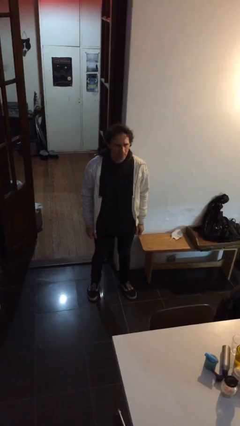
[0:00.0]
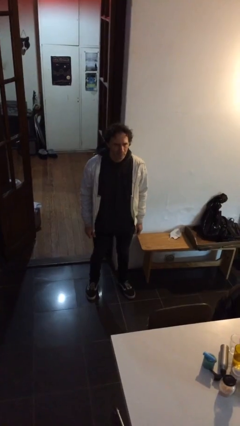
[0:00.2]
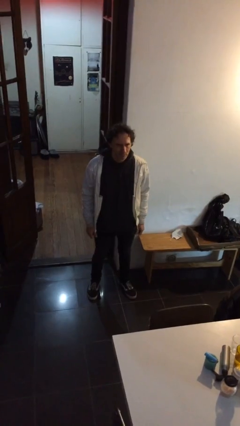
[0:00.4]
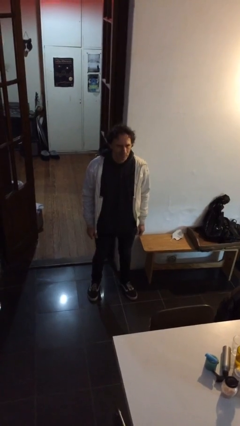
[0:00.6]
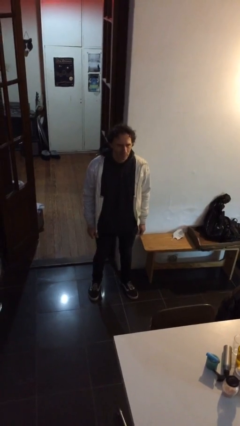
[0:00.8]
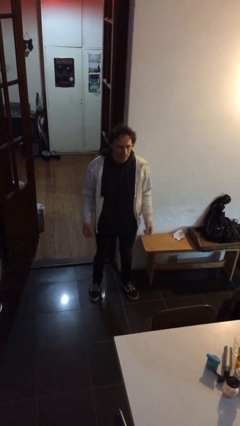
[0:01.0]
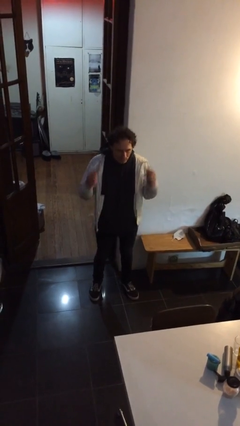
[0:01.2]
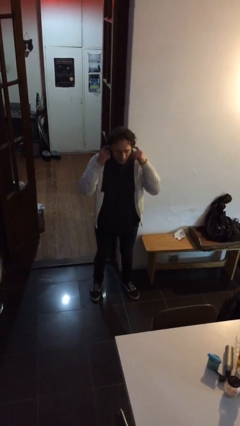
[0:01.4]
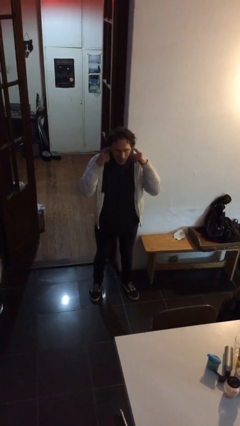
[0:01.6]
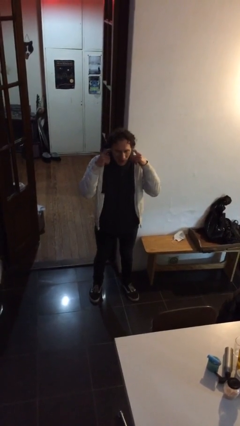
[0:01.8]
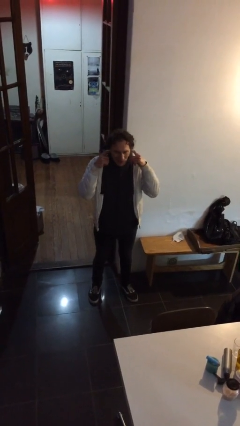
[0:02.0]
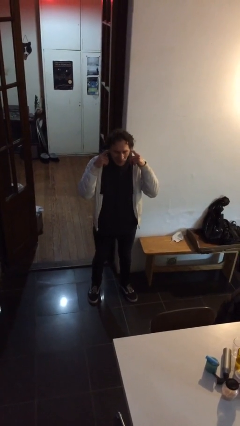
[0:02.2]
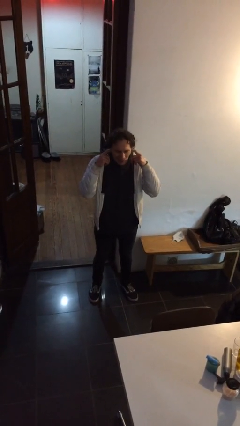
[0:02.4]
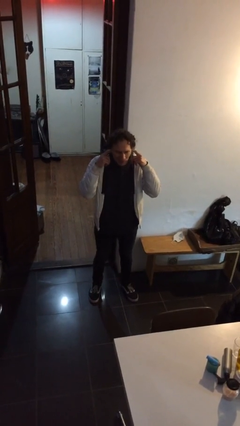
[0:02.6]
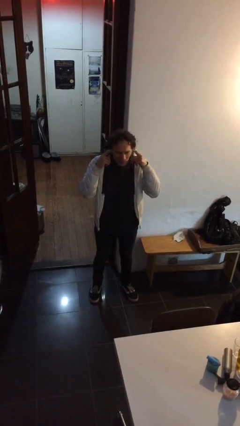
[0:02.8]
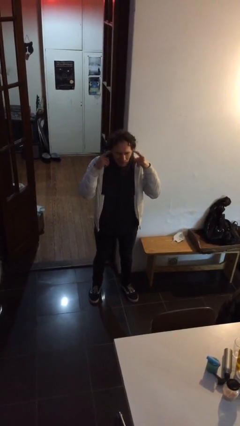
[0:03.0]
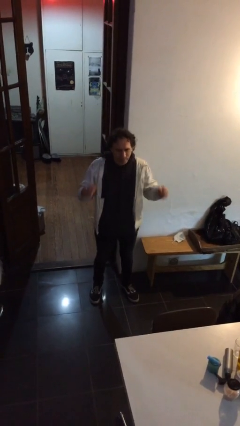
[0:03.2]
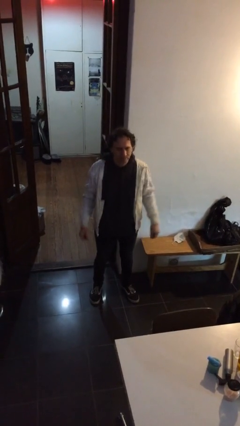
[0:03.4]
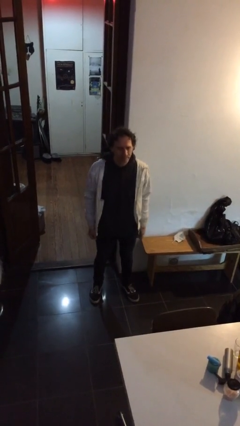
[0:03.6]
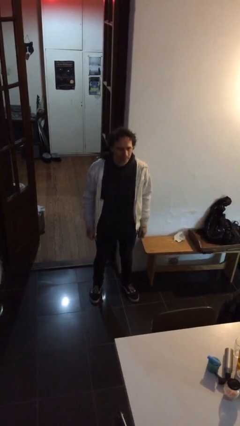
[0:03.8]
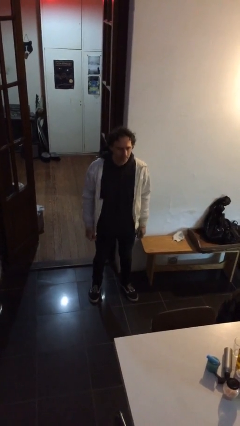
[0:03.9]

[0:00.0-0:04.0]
person puts fingers in ear

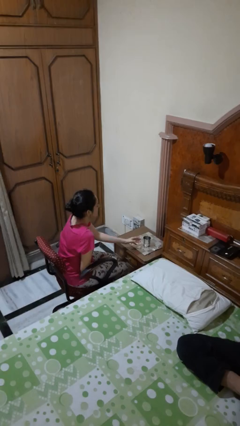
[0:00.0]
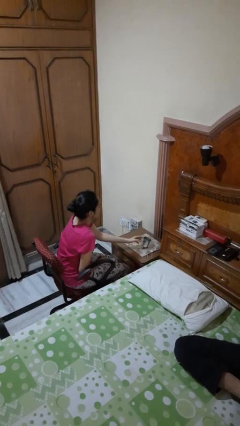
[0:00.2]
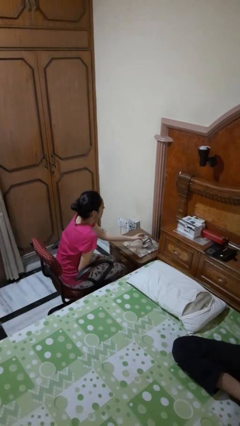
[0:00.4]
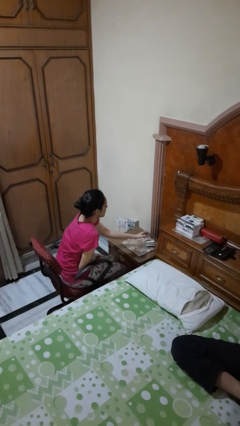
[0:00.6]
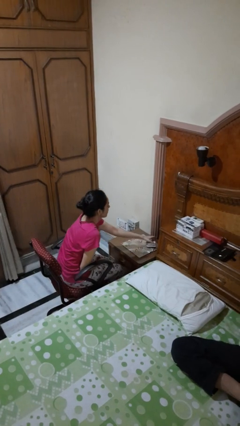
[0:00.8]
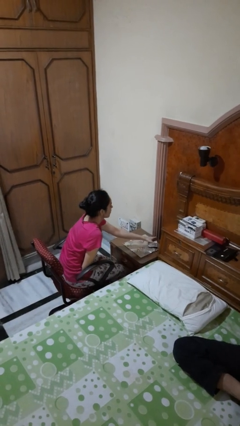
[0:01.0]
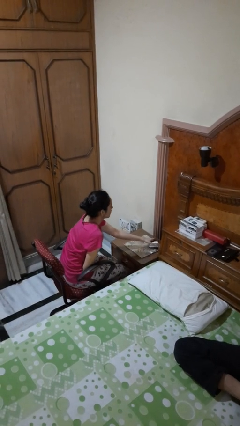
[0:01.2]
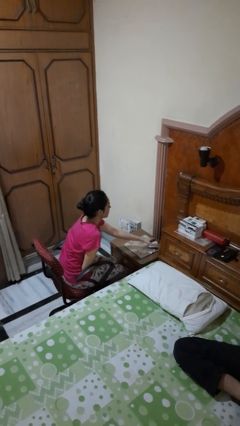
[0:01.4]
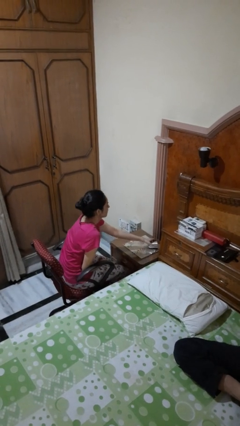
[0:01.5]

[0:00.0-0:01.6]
person knocks over glass

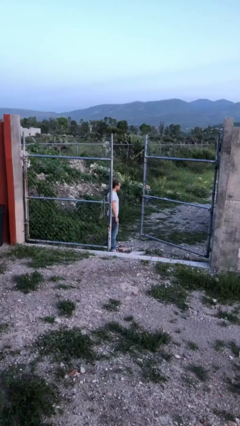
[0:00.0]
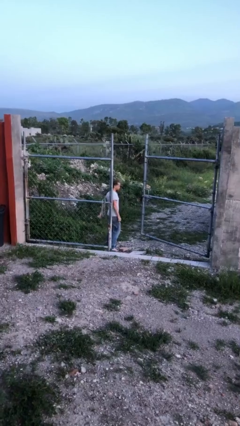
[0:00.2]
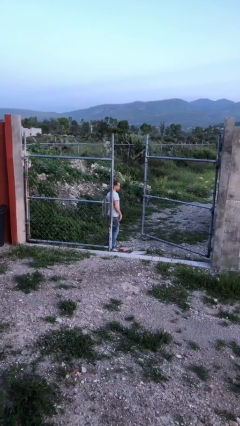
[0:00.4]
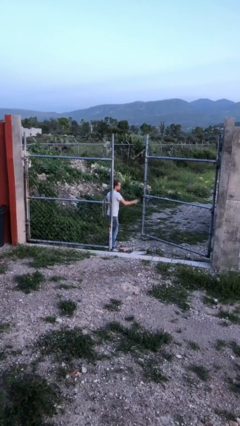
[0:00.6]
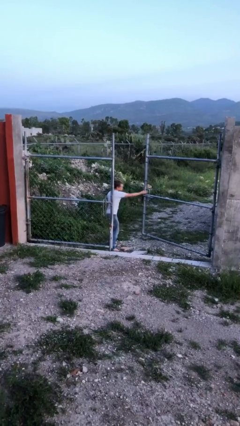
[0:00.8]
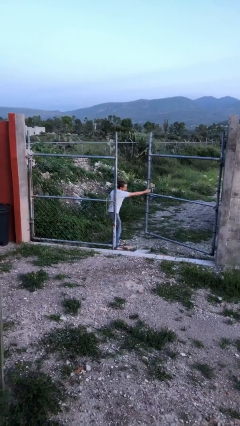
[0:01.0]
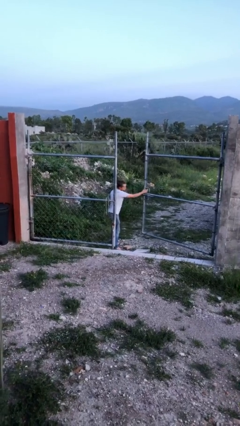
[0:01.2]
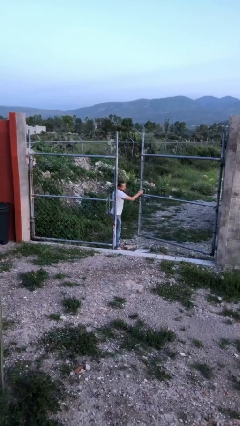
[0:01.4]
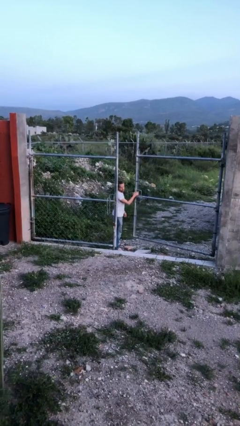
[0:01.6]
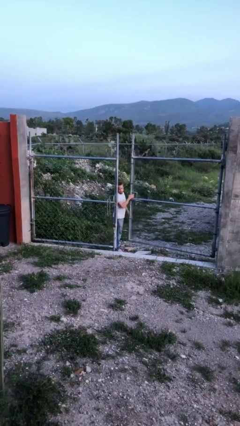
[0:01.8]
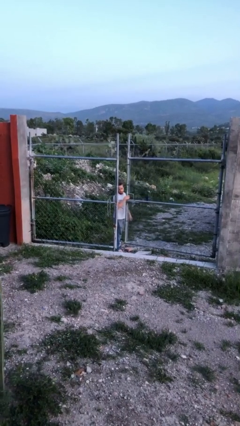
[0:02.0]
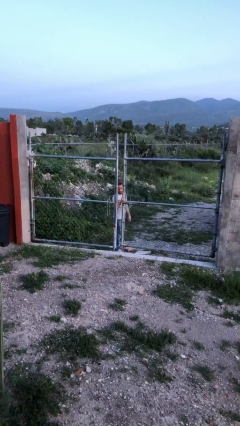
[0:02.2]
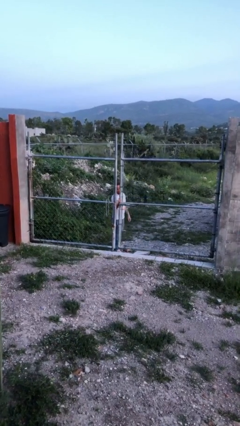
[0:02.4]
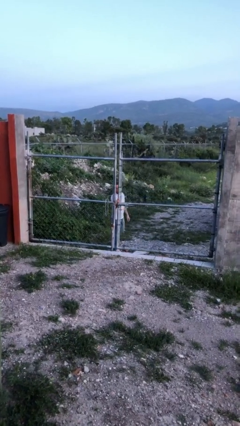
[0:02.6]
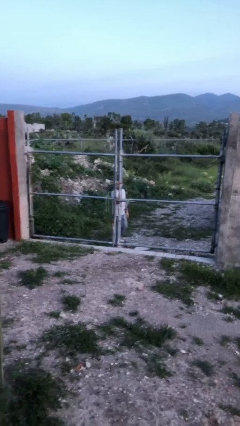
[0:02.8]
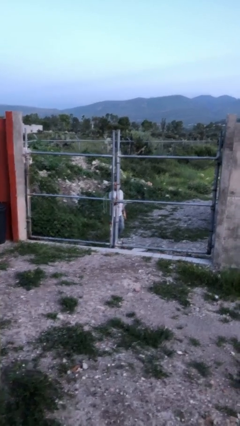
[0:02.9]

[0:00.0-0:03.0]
person closes gate

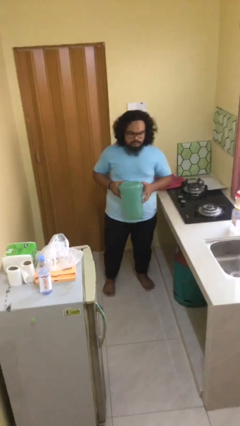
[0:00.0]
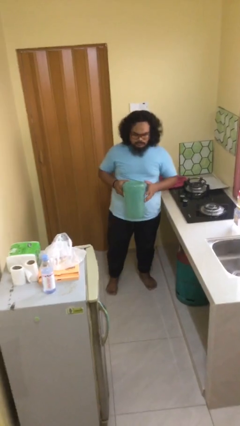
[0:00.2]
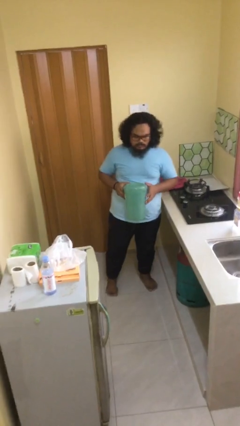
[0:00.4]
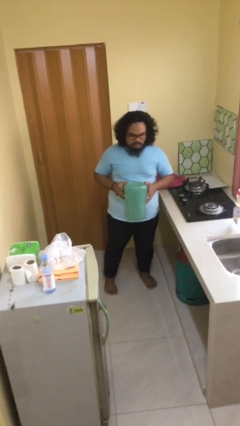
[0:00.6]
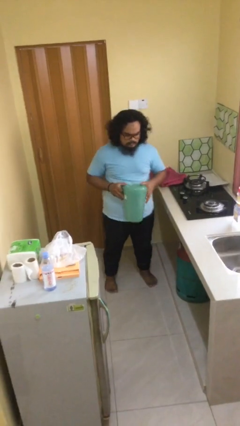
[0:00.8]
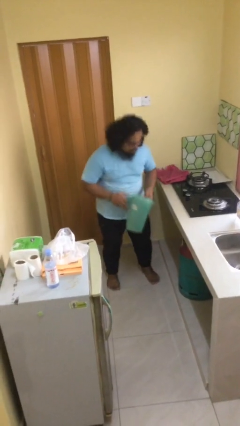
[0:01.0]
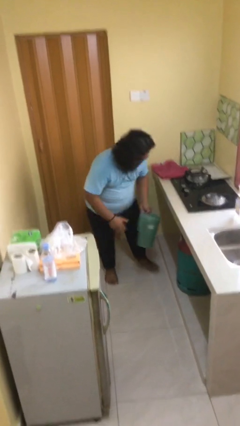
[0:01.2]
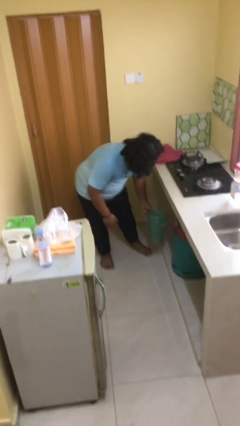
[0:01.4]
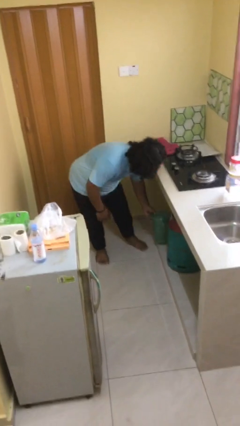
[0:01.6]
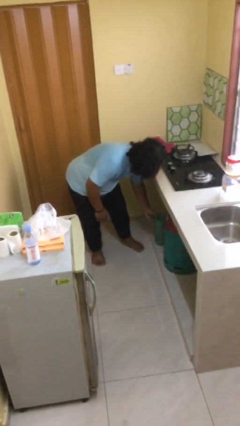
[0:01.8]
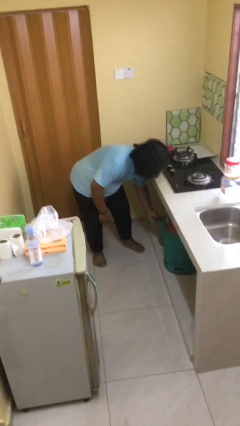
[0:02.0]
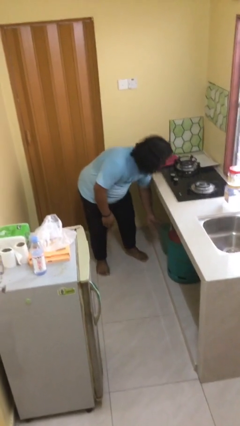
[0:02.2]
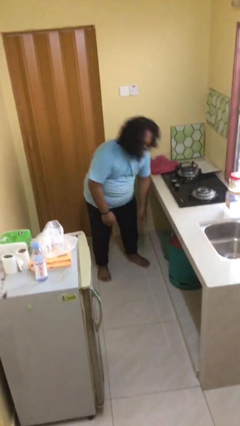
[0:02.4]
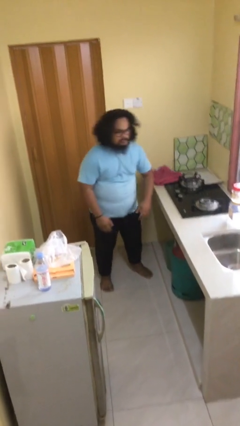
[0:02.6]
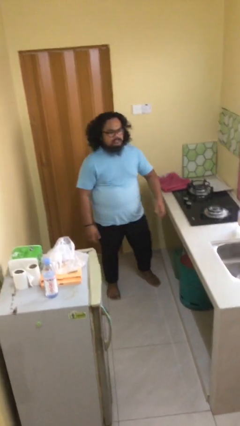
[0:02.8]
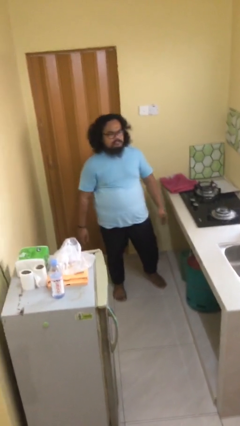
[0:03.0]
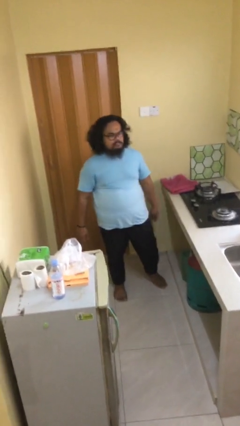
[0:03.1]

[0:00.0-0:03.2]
person puts down object into cabinet

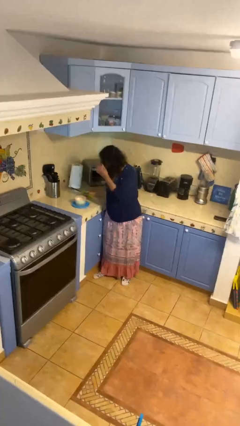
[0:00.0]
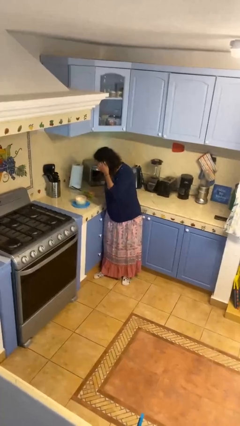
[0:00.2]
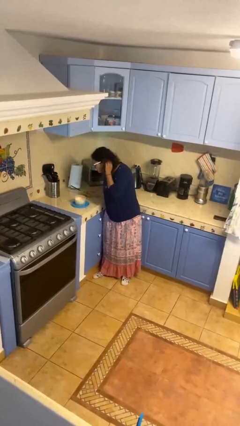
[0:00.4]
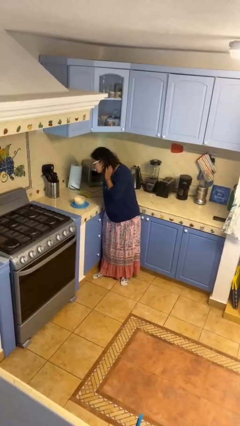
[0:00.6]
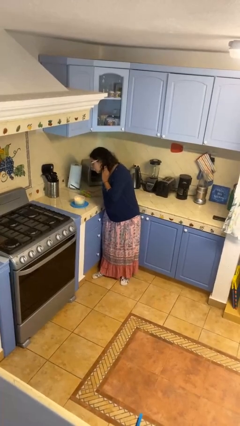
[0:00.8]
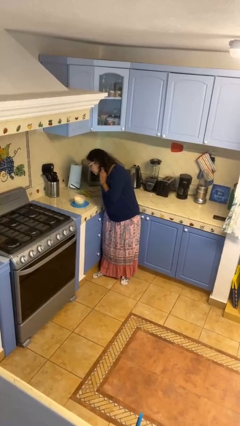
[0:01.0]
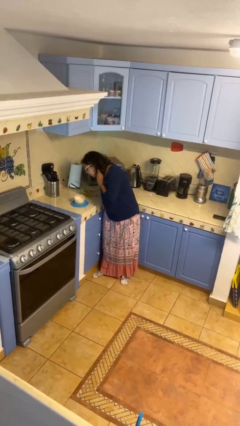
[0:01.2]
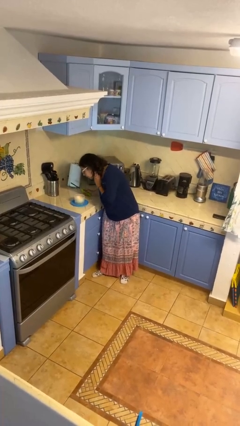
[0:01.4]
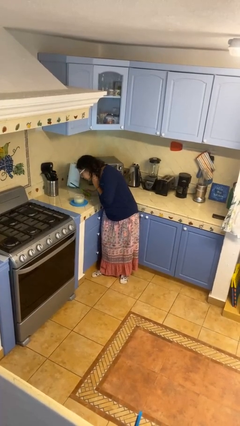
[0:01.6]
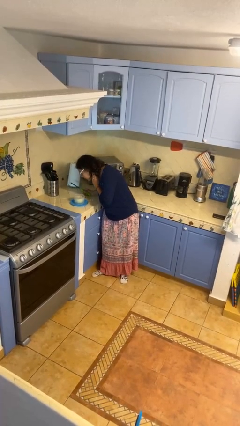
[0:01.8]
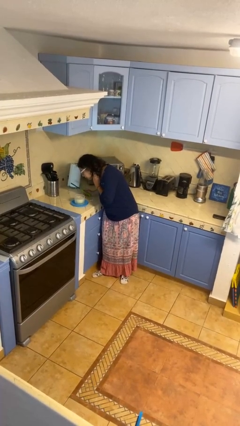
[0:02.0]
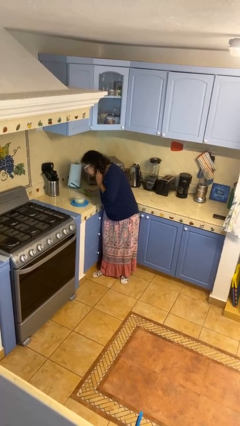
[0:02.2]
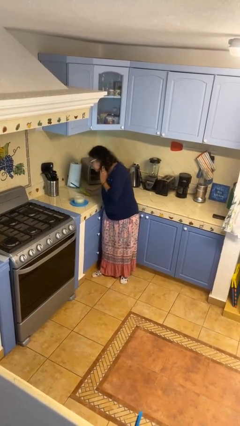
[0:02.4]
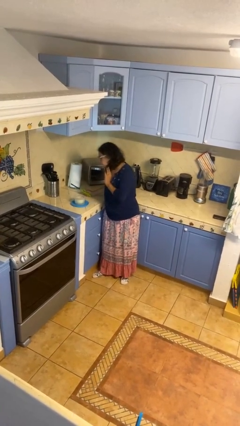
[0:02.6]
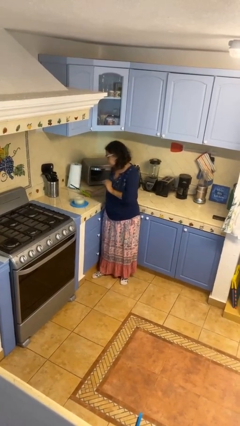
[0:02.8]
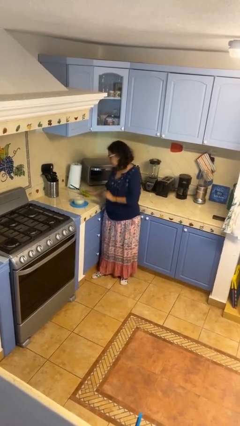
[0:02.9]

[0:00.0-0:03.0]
person extinguishes candle

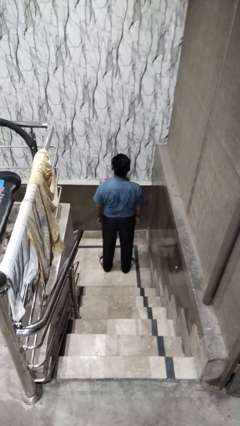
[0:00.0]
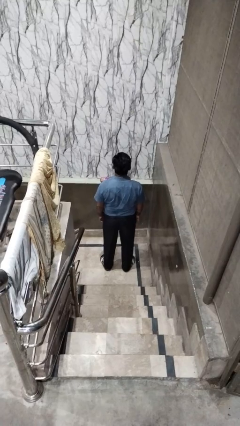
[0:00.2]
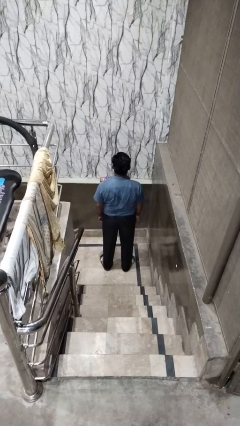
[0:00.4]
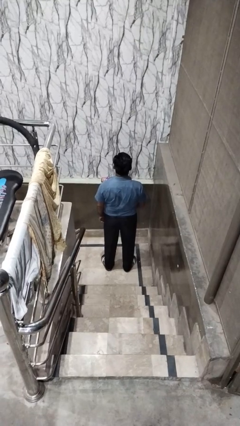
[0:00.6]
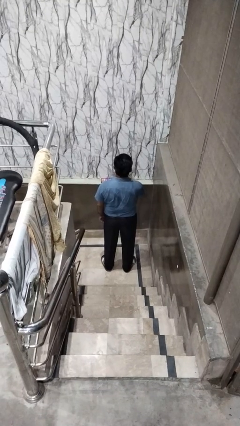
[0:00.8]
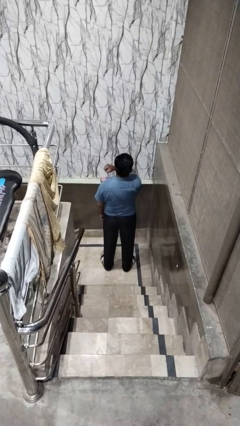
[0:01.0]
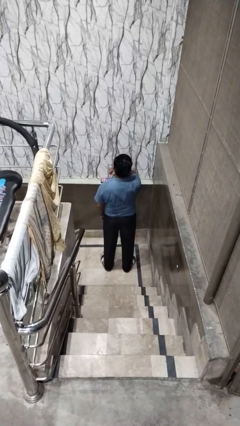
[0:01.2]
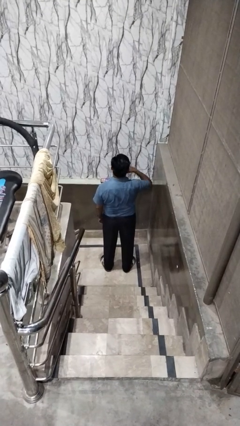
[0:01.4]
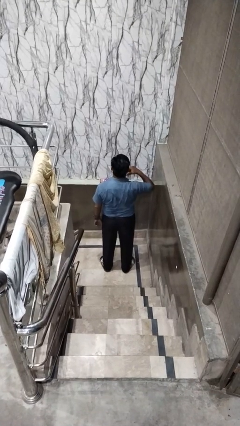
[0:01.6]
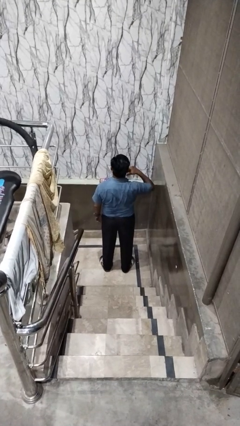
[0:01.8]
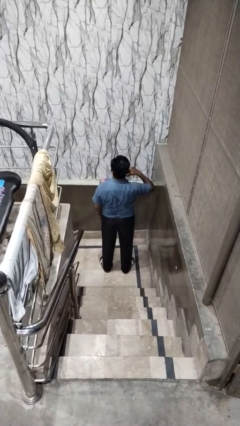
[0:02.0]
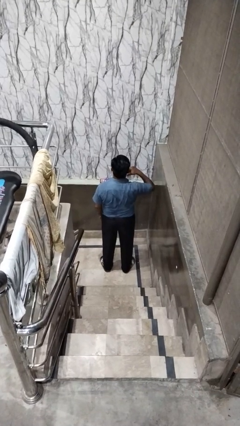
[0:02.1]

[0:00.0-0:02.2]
person gestures cut

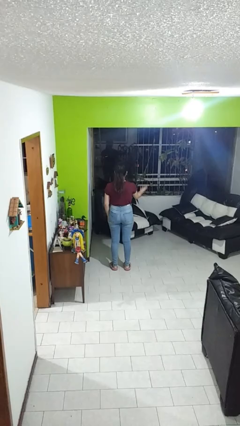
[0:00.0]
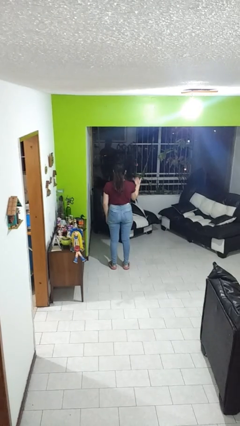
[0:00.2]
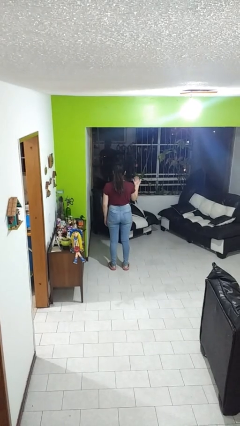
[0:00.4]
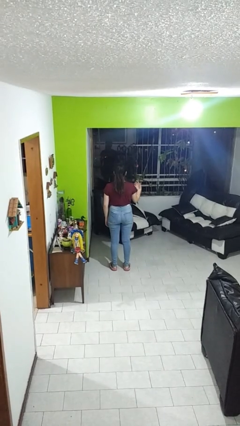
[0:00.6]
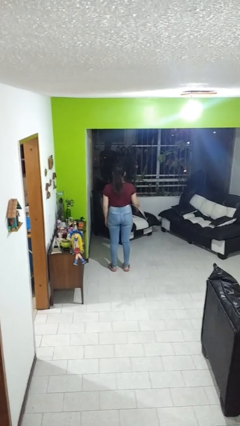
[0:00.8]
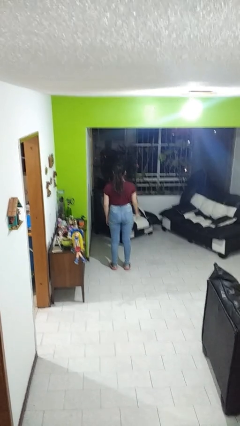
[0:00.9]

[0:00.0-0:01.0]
person gestures come here
